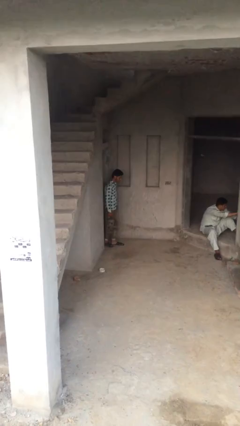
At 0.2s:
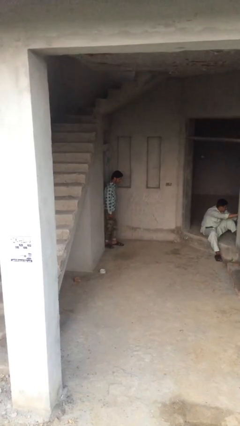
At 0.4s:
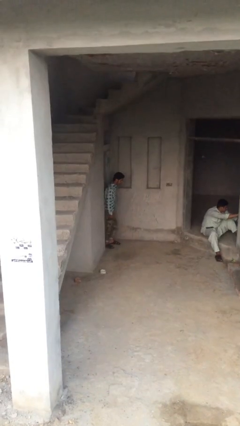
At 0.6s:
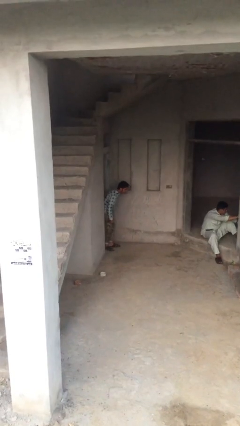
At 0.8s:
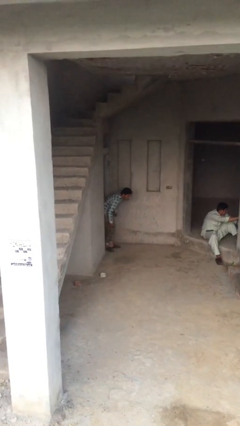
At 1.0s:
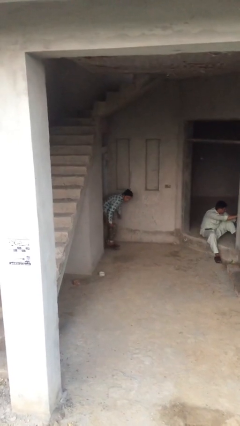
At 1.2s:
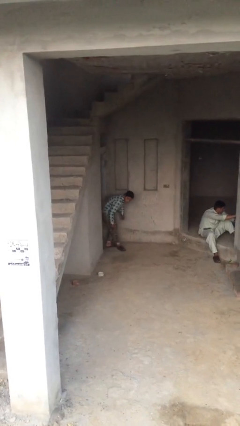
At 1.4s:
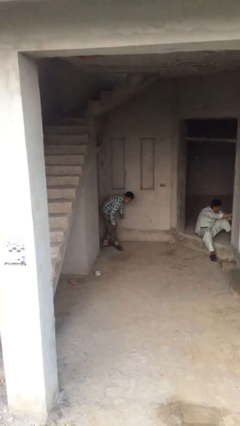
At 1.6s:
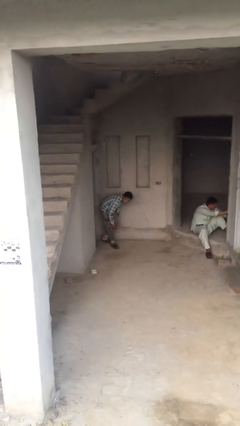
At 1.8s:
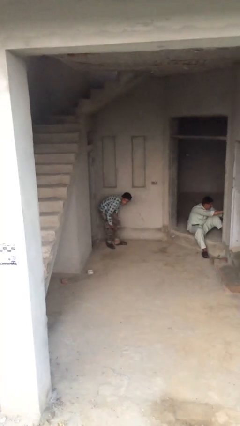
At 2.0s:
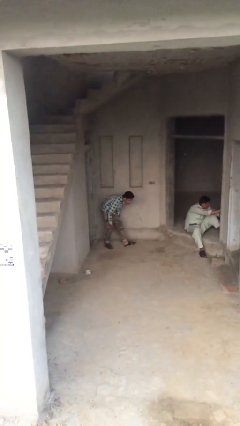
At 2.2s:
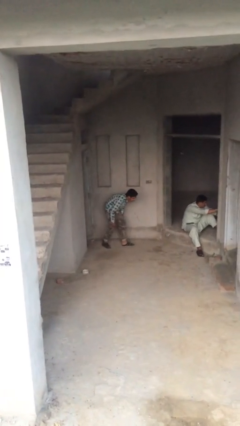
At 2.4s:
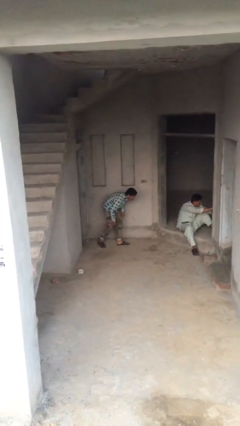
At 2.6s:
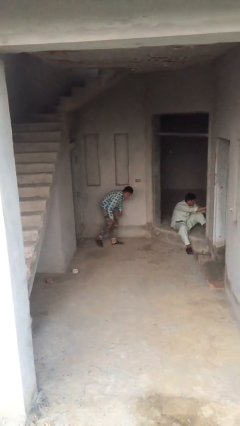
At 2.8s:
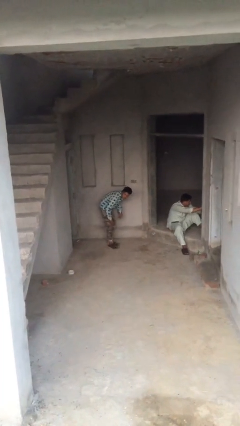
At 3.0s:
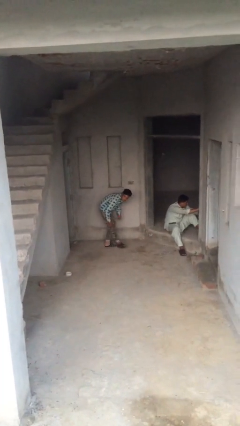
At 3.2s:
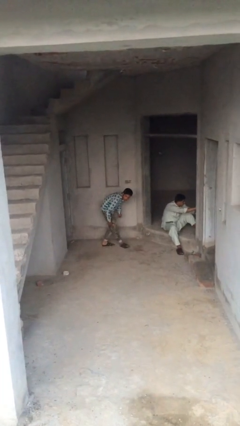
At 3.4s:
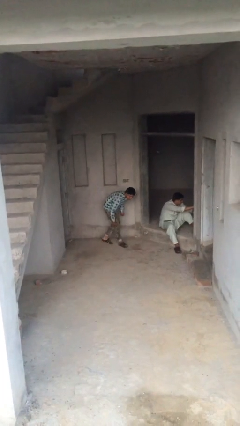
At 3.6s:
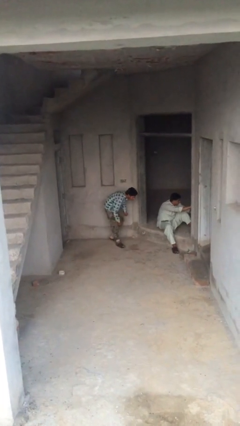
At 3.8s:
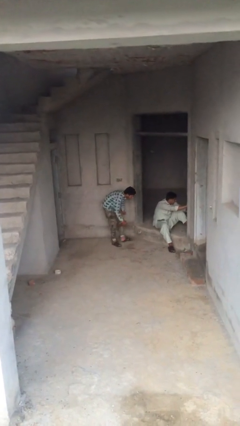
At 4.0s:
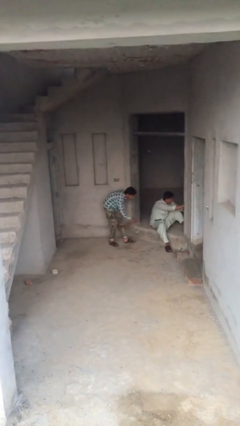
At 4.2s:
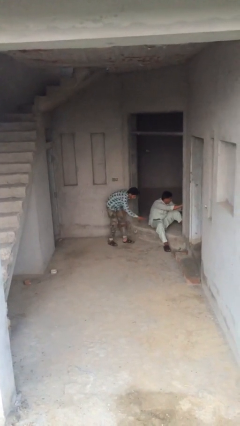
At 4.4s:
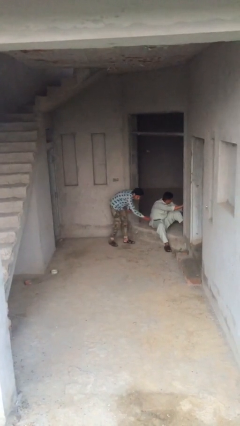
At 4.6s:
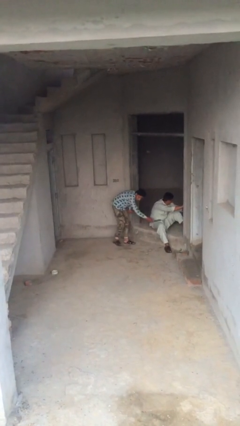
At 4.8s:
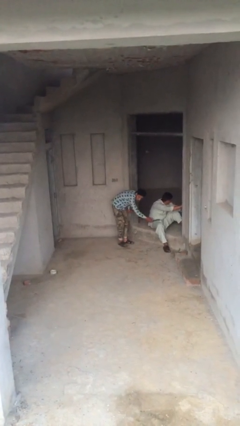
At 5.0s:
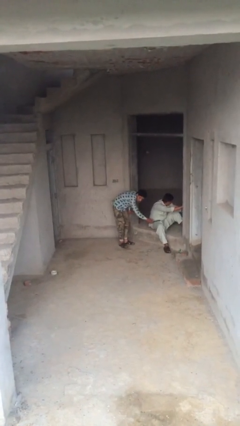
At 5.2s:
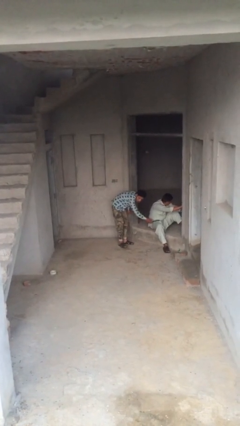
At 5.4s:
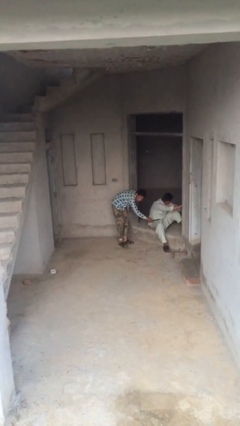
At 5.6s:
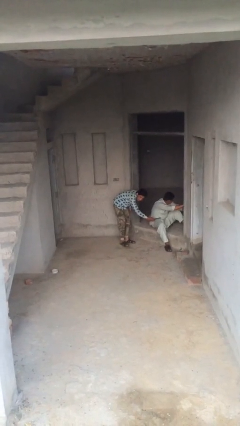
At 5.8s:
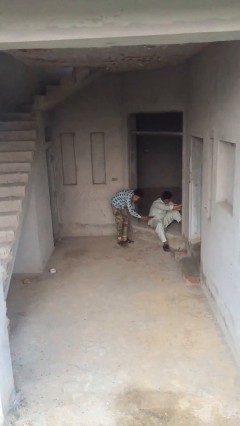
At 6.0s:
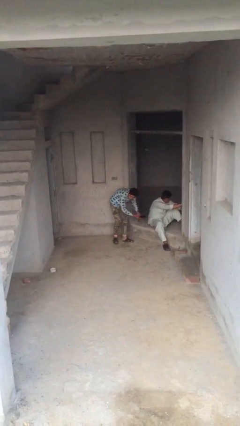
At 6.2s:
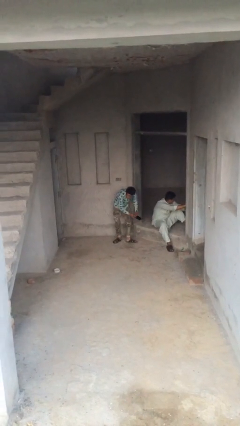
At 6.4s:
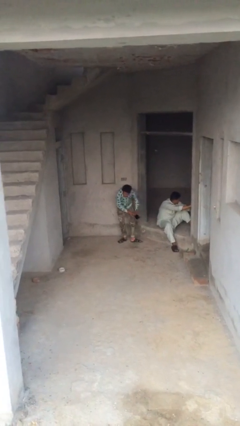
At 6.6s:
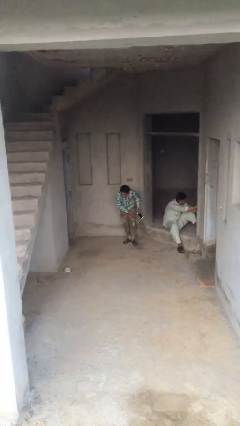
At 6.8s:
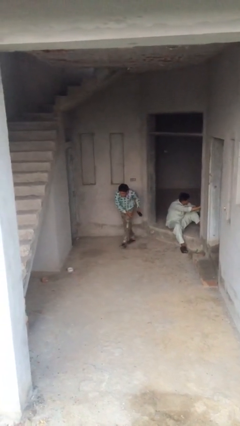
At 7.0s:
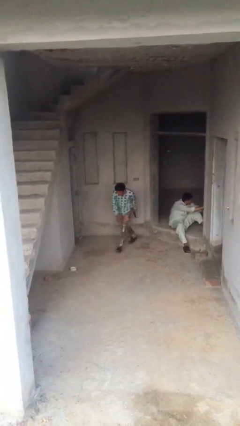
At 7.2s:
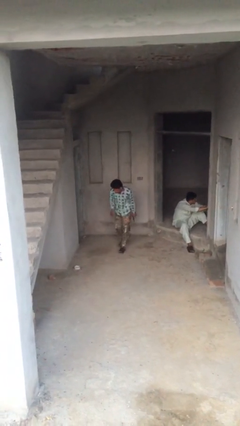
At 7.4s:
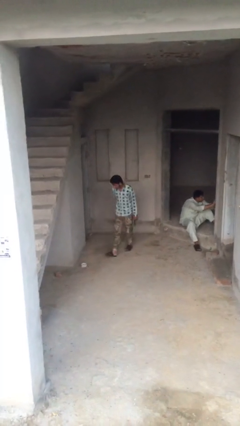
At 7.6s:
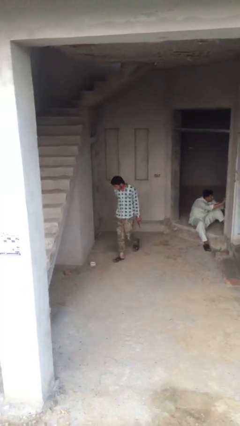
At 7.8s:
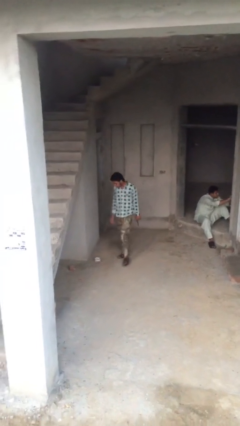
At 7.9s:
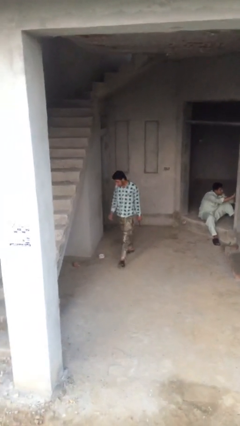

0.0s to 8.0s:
person steals object from person

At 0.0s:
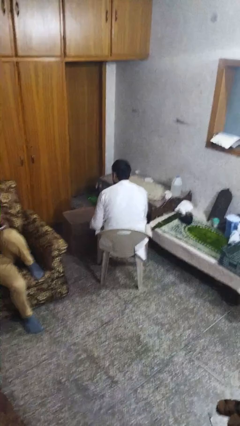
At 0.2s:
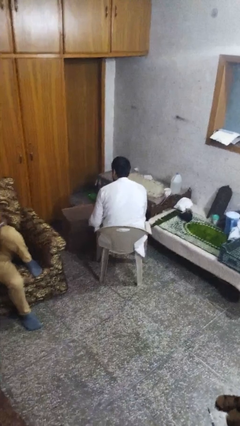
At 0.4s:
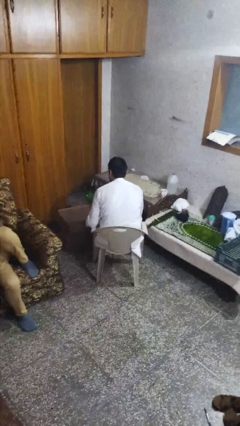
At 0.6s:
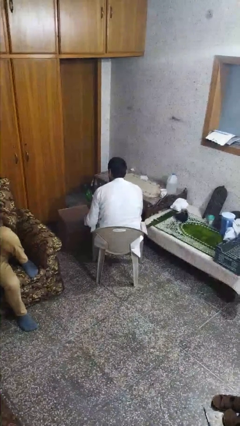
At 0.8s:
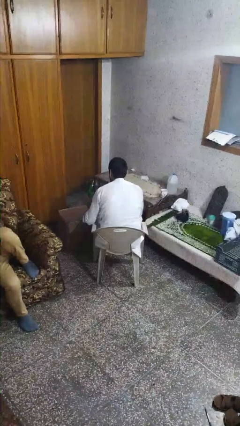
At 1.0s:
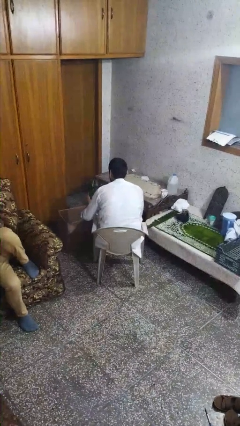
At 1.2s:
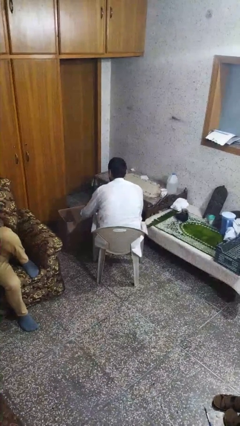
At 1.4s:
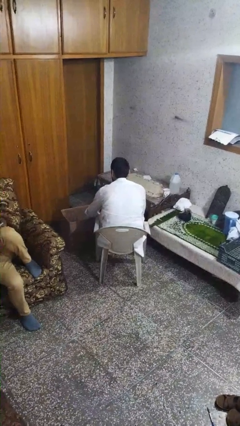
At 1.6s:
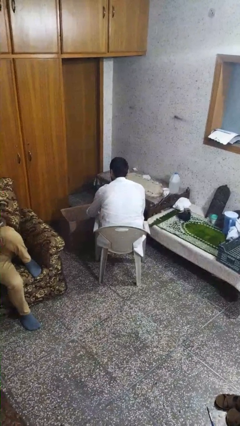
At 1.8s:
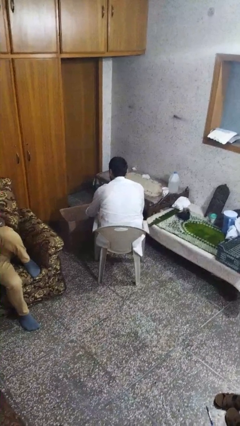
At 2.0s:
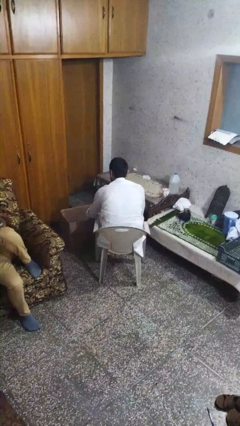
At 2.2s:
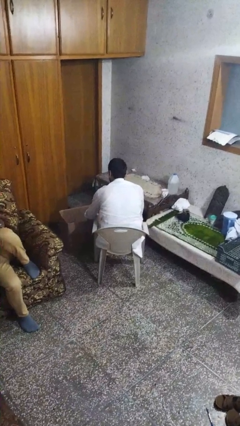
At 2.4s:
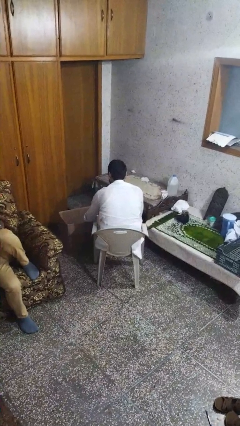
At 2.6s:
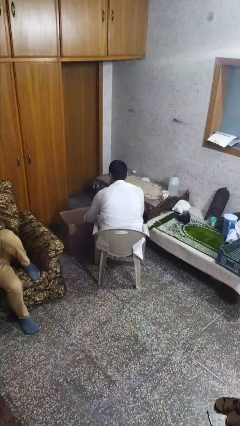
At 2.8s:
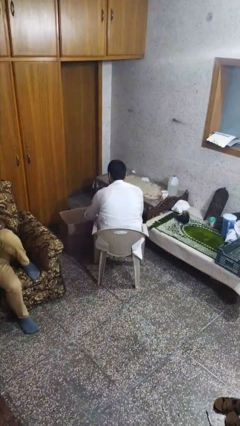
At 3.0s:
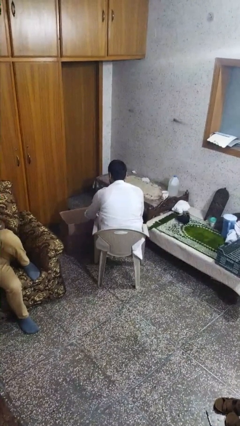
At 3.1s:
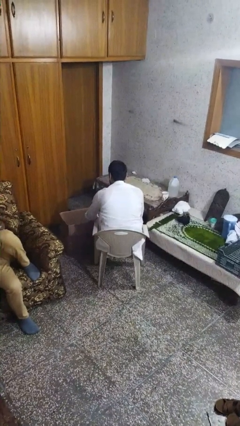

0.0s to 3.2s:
person puts object into box

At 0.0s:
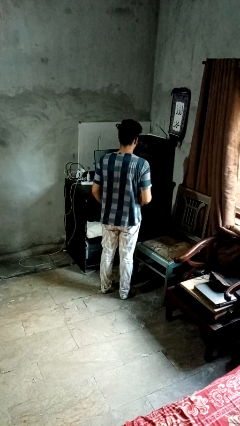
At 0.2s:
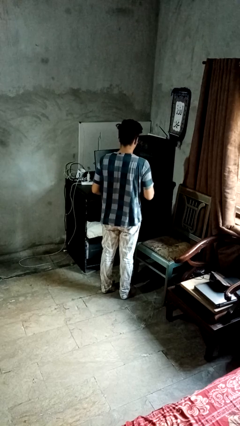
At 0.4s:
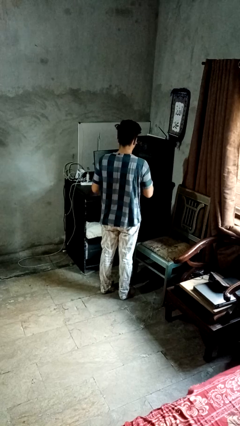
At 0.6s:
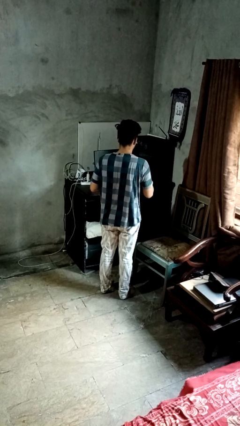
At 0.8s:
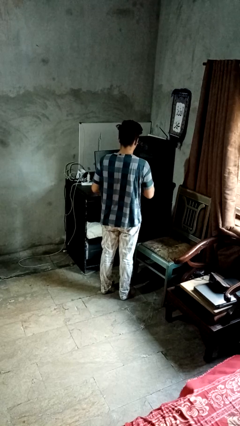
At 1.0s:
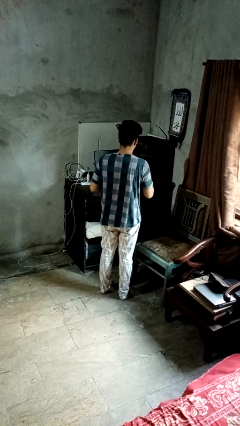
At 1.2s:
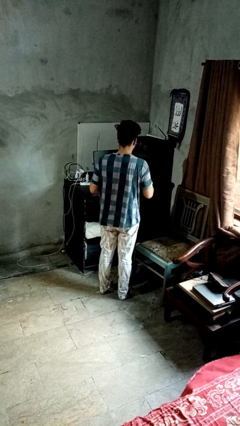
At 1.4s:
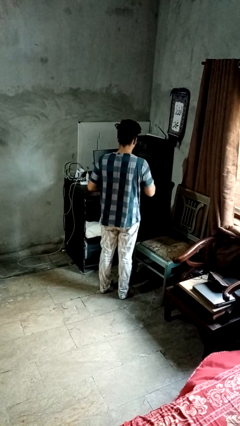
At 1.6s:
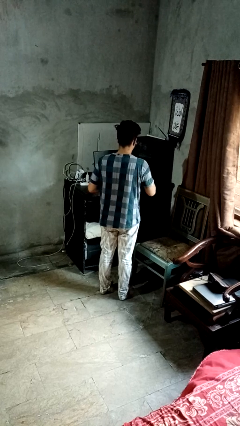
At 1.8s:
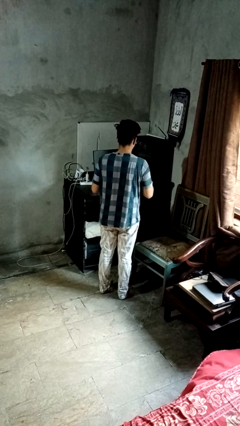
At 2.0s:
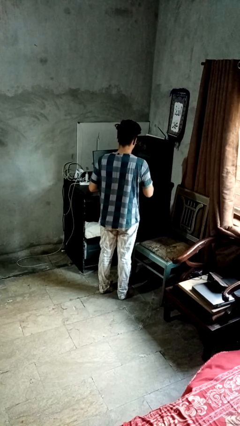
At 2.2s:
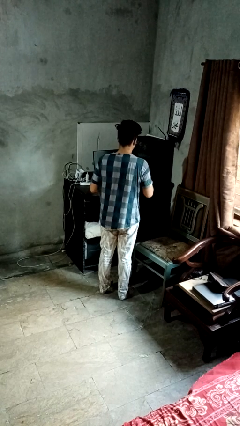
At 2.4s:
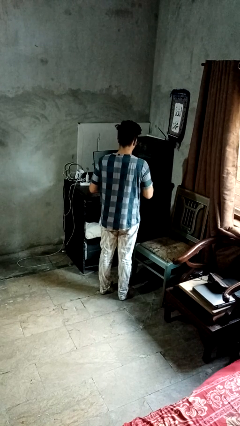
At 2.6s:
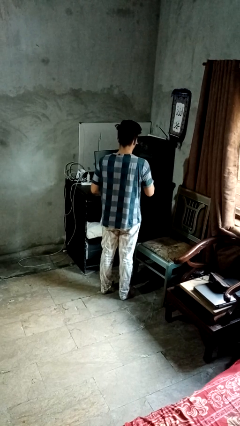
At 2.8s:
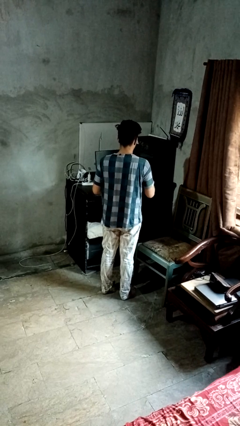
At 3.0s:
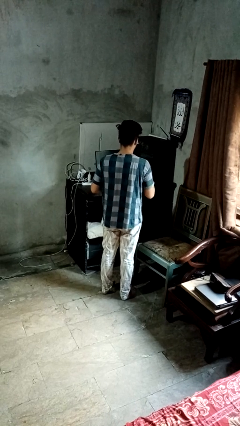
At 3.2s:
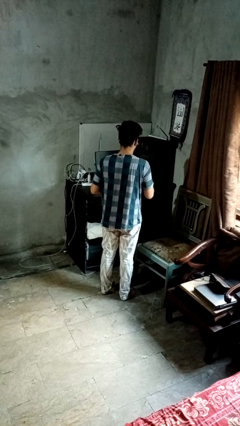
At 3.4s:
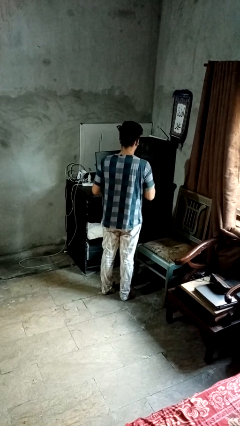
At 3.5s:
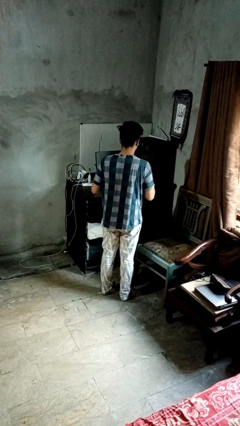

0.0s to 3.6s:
person drums on chest

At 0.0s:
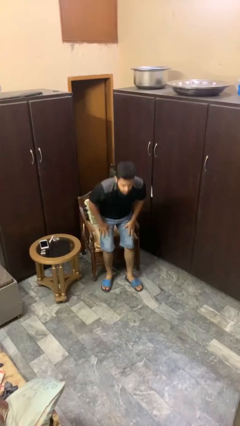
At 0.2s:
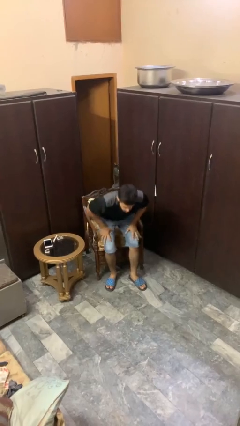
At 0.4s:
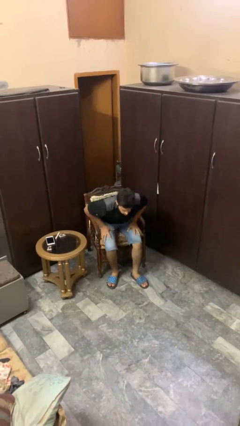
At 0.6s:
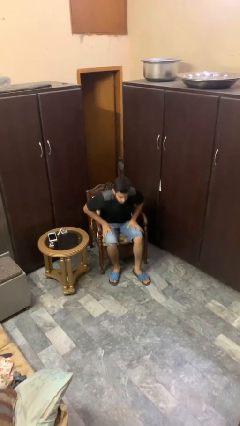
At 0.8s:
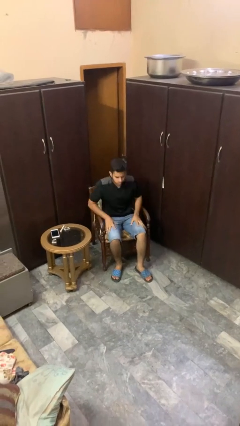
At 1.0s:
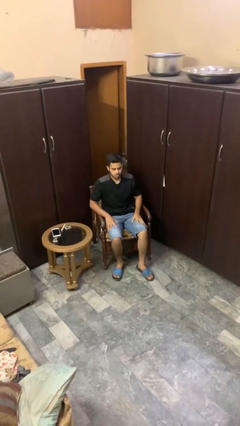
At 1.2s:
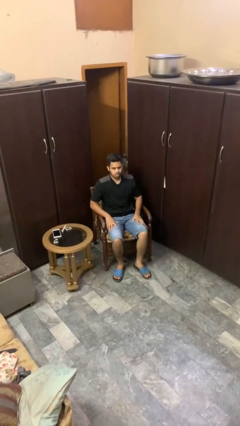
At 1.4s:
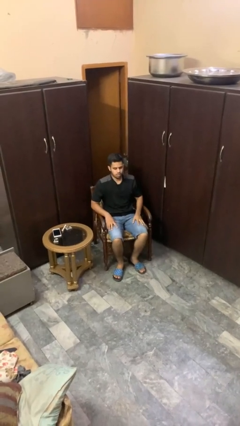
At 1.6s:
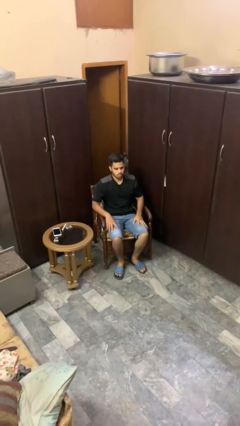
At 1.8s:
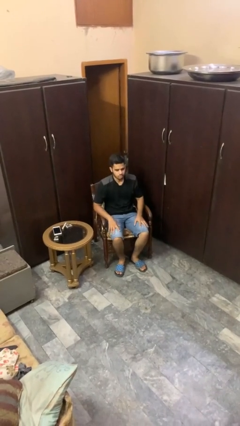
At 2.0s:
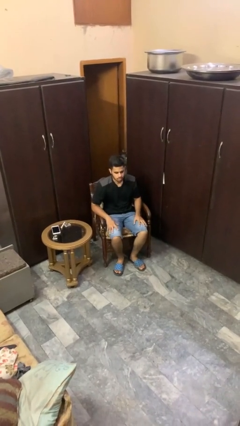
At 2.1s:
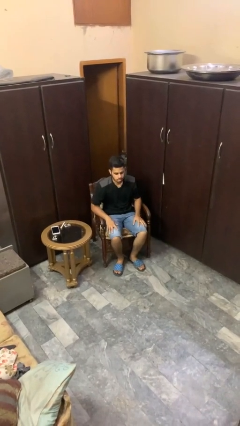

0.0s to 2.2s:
person sits down

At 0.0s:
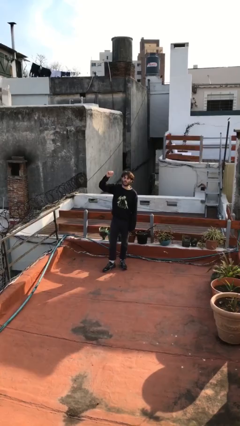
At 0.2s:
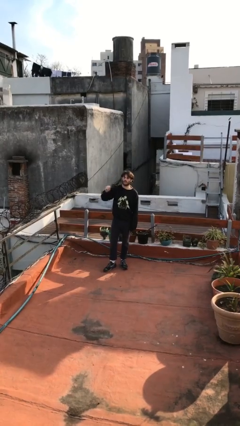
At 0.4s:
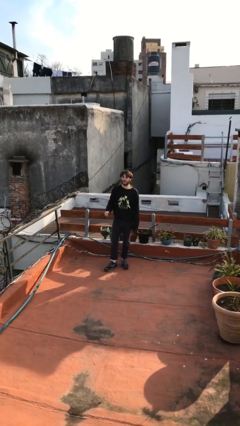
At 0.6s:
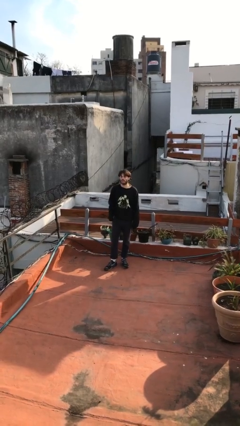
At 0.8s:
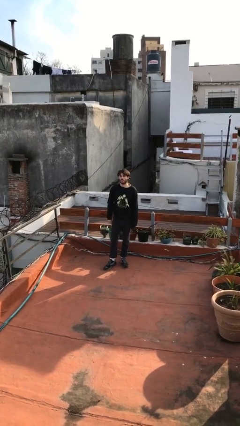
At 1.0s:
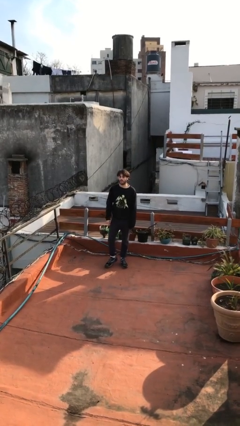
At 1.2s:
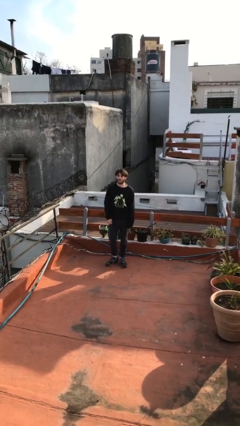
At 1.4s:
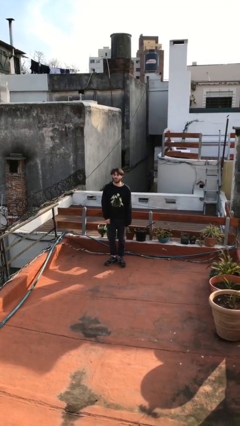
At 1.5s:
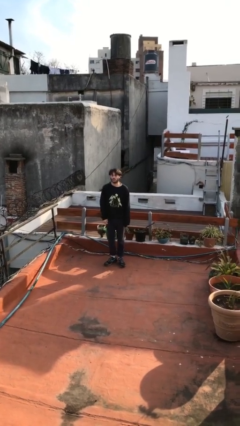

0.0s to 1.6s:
person gestures lower hand
